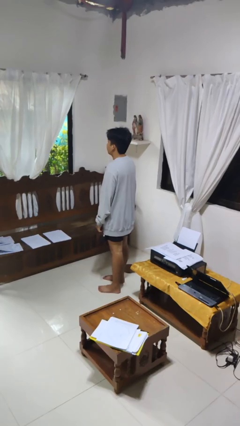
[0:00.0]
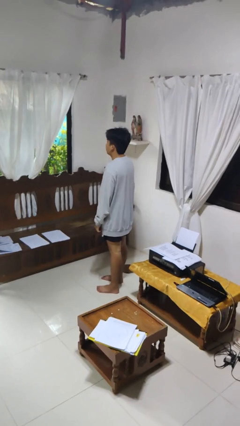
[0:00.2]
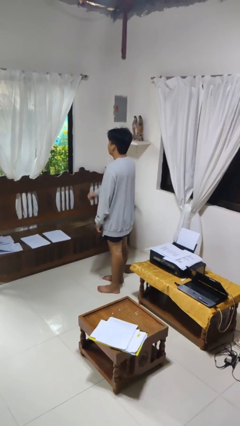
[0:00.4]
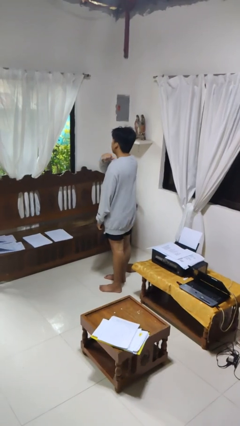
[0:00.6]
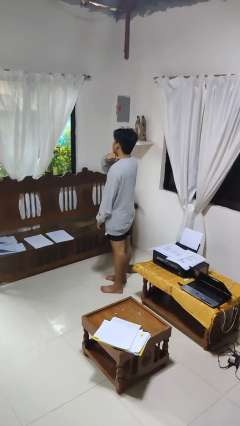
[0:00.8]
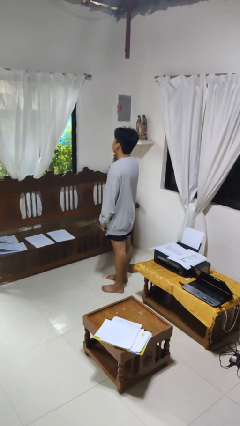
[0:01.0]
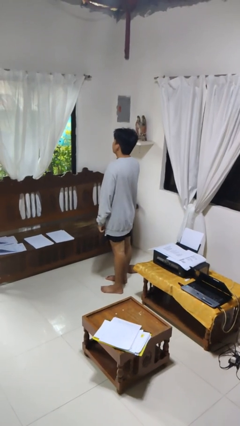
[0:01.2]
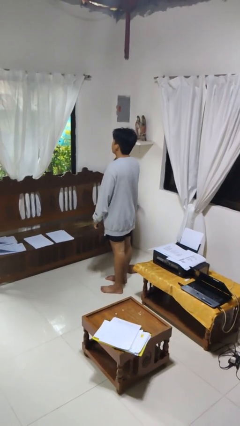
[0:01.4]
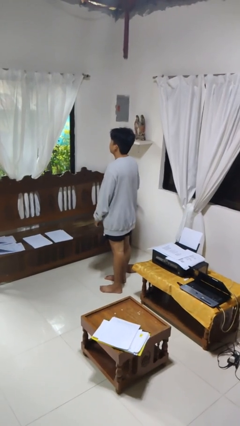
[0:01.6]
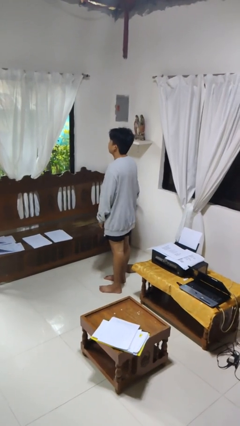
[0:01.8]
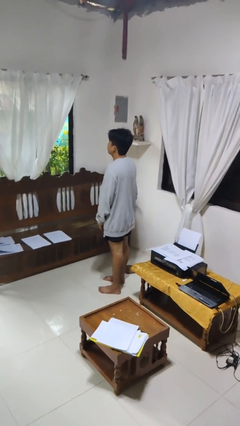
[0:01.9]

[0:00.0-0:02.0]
person gestures cut

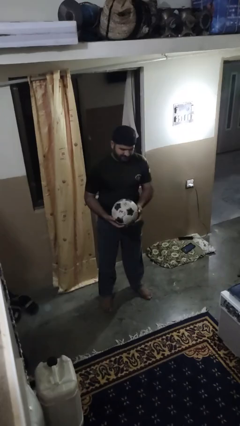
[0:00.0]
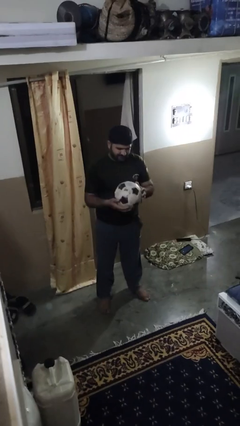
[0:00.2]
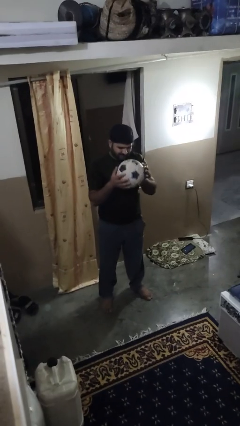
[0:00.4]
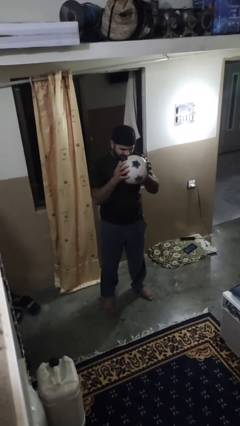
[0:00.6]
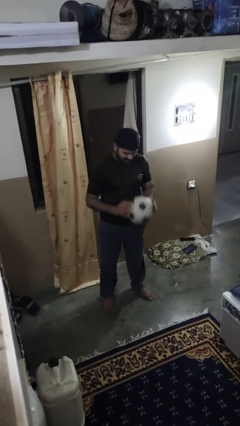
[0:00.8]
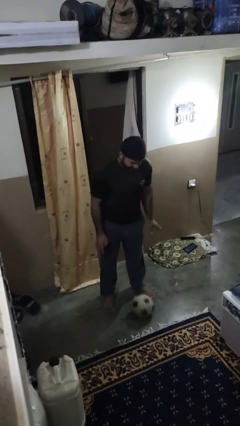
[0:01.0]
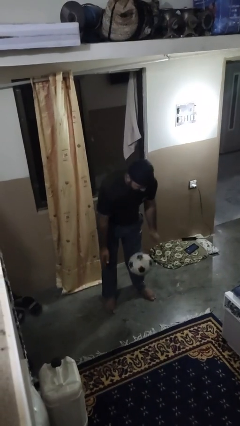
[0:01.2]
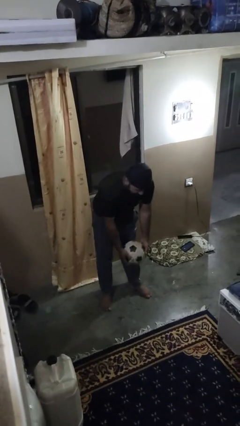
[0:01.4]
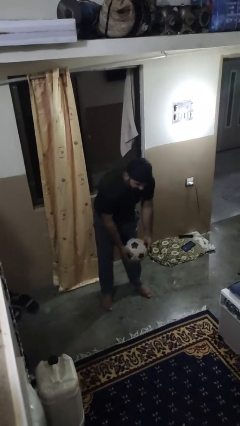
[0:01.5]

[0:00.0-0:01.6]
person bounces ball on floor

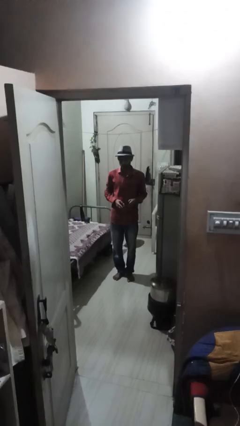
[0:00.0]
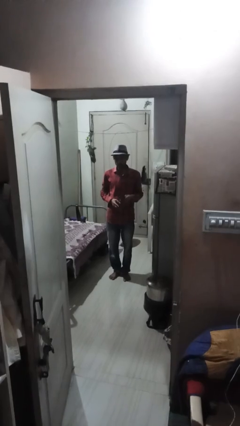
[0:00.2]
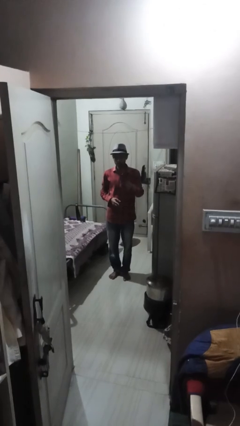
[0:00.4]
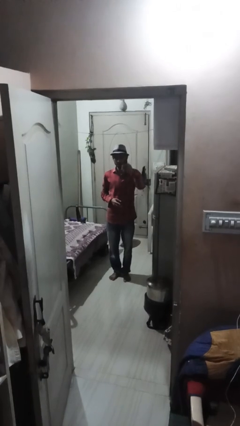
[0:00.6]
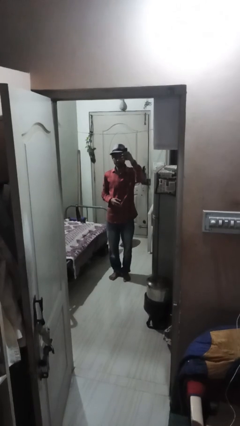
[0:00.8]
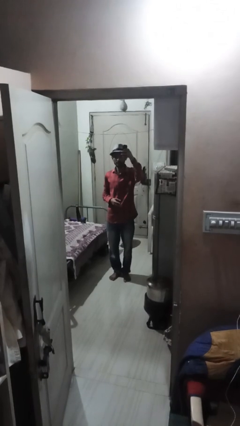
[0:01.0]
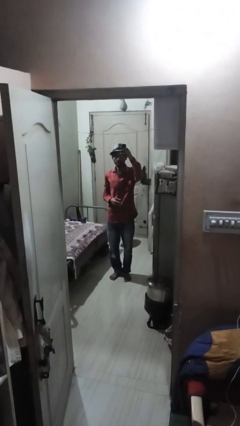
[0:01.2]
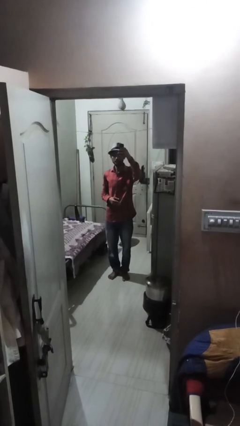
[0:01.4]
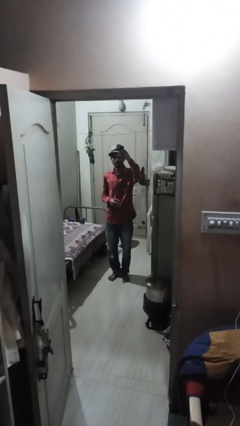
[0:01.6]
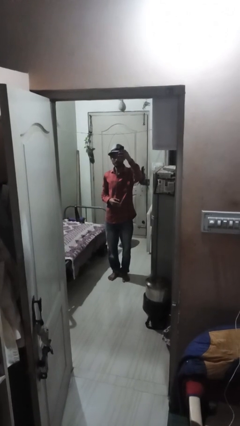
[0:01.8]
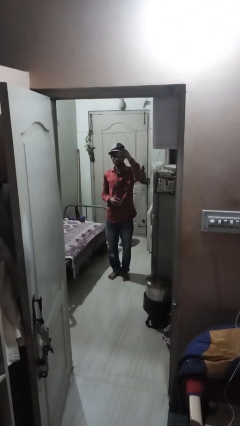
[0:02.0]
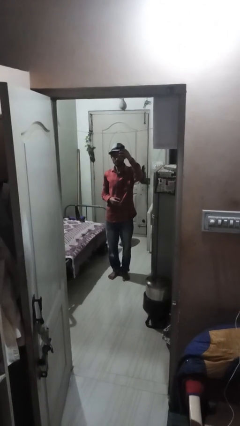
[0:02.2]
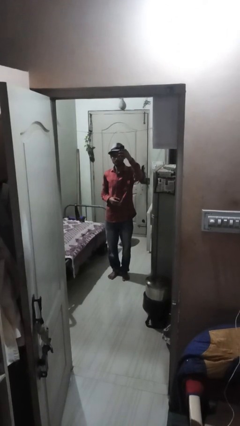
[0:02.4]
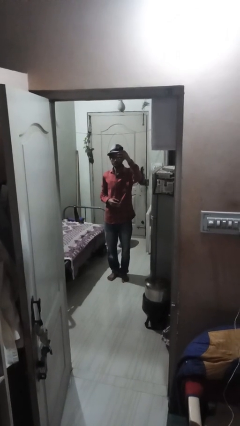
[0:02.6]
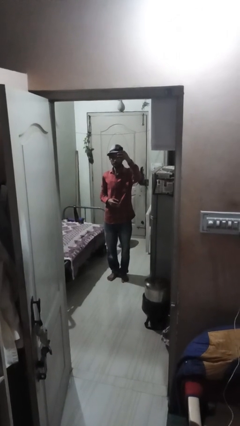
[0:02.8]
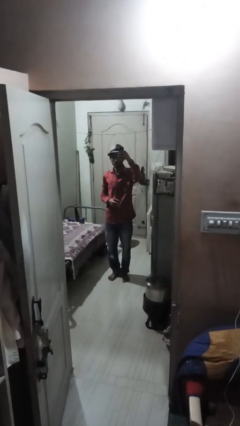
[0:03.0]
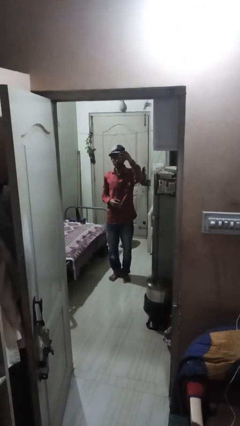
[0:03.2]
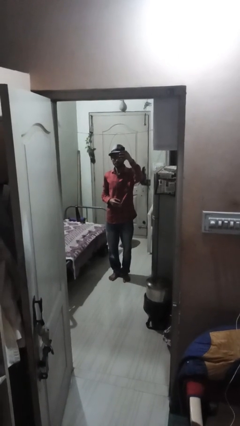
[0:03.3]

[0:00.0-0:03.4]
person takes selfie

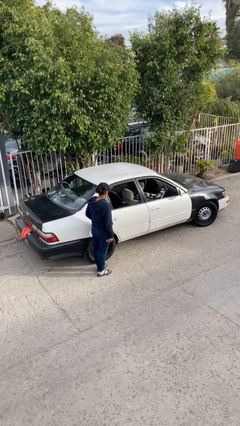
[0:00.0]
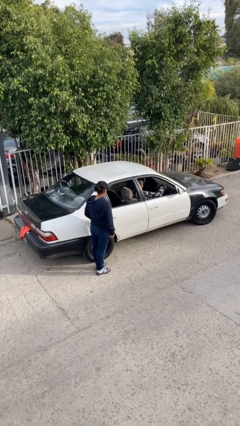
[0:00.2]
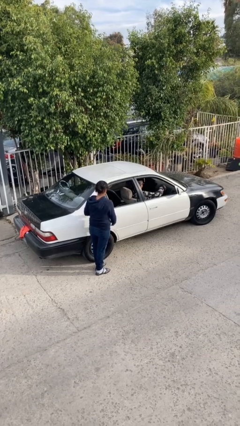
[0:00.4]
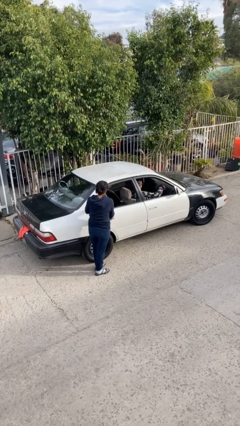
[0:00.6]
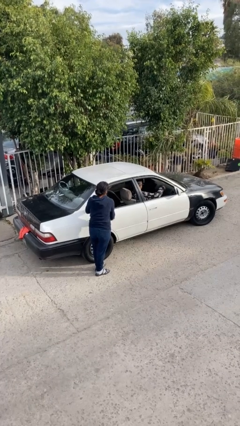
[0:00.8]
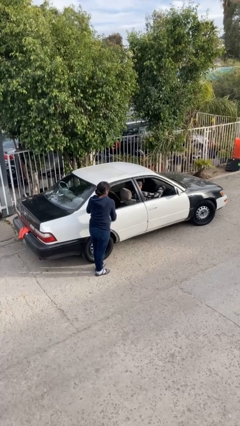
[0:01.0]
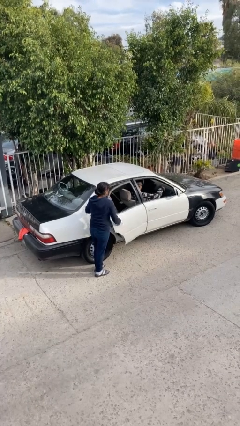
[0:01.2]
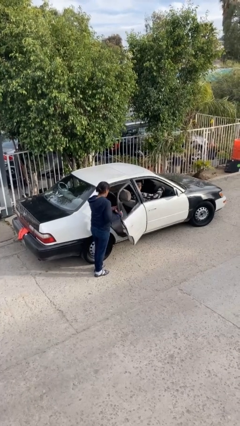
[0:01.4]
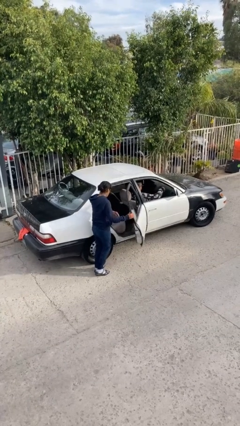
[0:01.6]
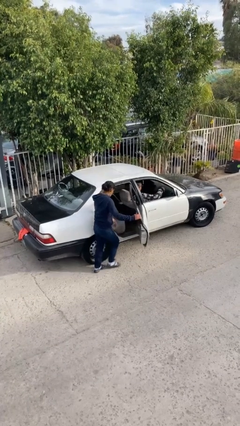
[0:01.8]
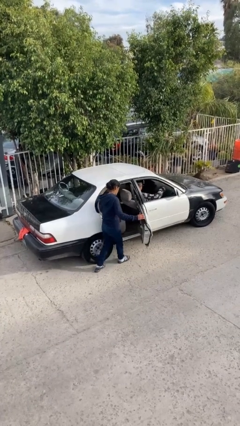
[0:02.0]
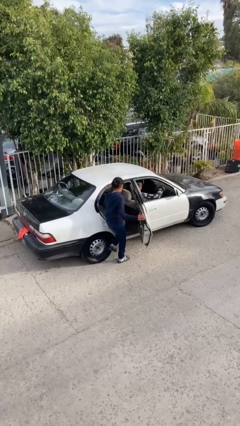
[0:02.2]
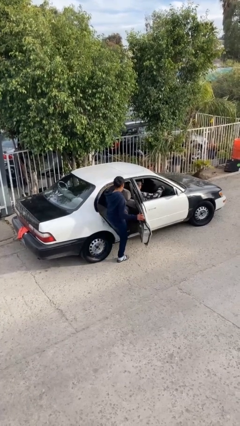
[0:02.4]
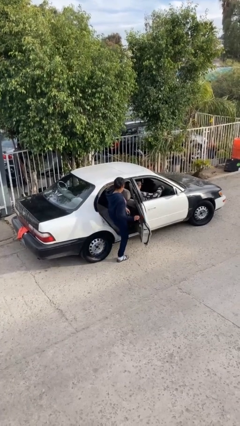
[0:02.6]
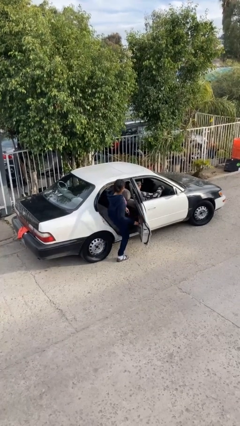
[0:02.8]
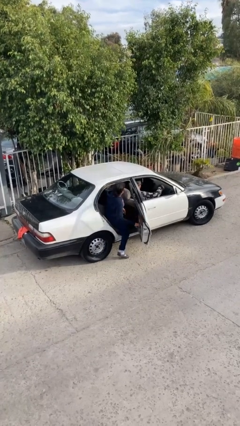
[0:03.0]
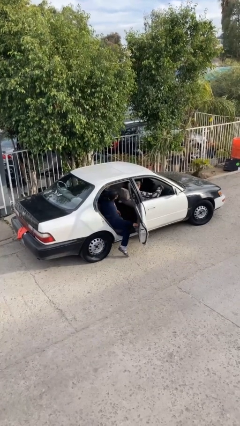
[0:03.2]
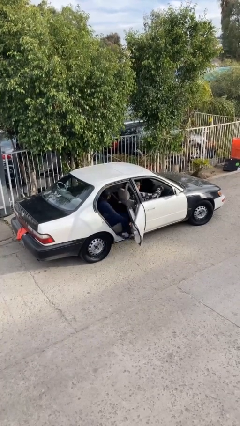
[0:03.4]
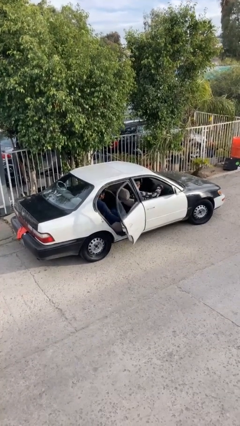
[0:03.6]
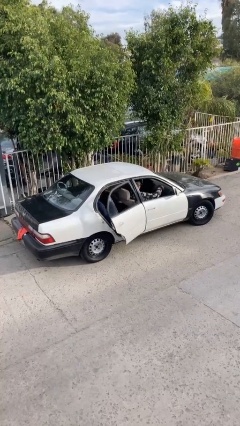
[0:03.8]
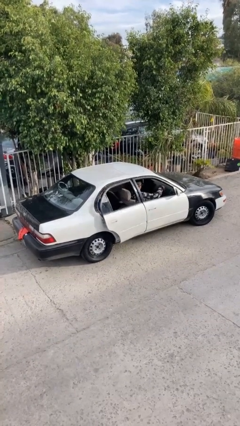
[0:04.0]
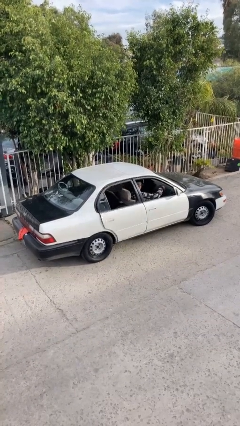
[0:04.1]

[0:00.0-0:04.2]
car picks up person

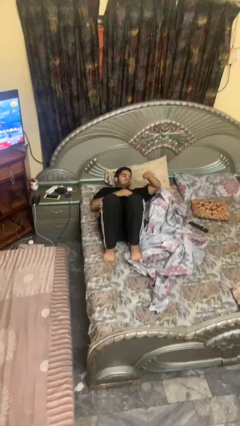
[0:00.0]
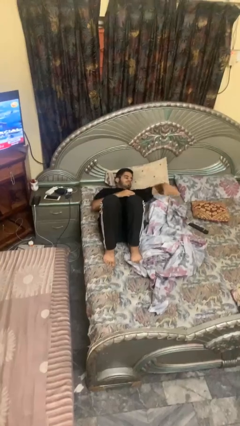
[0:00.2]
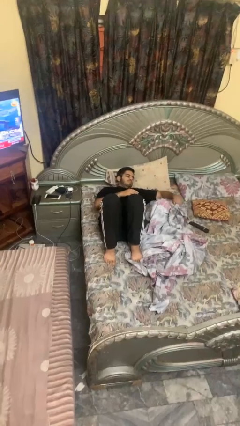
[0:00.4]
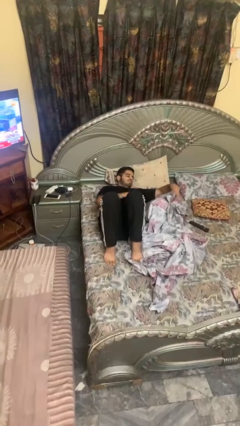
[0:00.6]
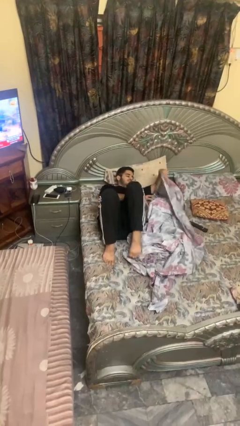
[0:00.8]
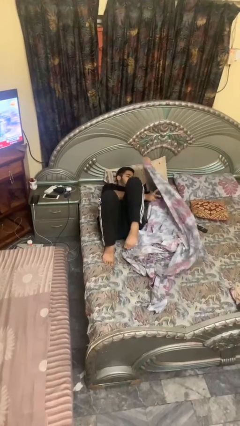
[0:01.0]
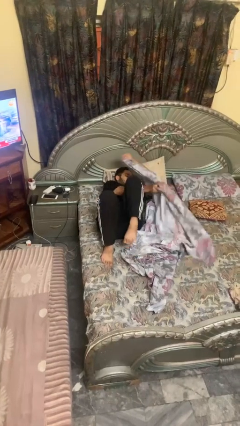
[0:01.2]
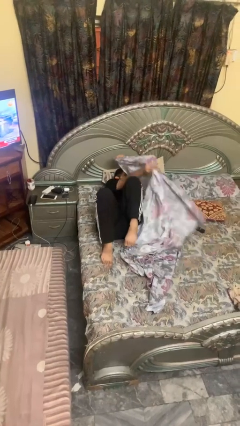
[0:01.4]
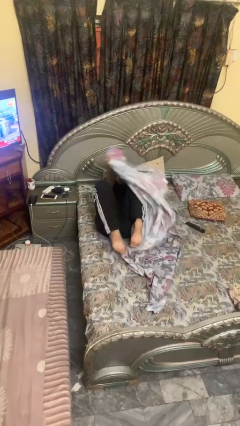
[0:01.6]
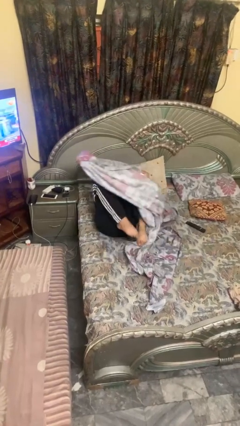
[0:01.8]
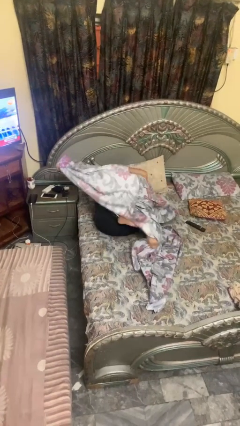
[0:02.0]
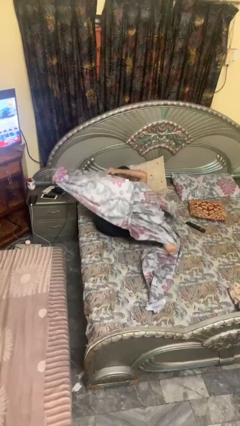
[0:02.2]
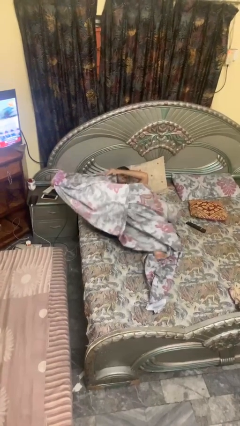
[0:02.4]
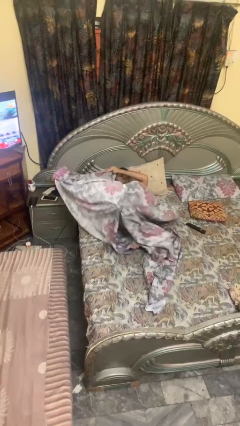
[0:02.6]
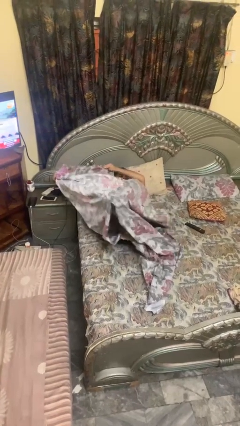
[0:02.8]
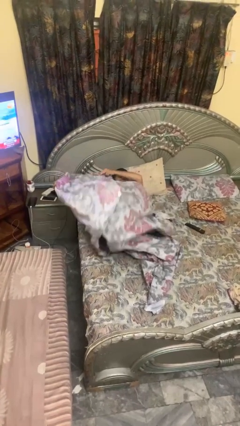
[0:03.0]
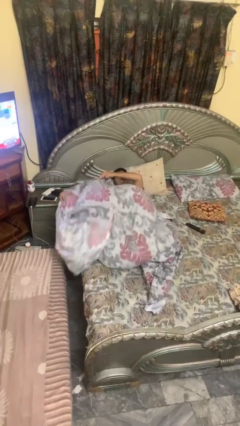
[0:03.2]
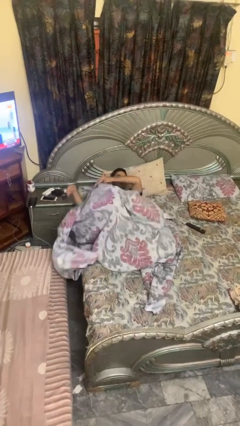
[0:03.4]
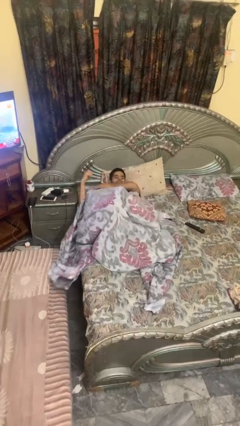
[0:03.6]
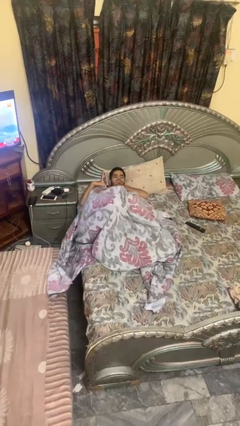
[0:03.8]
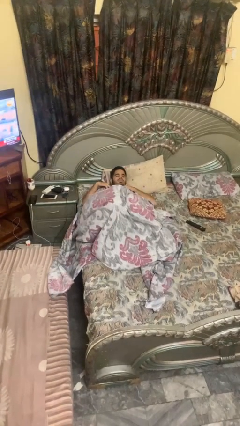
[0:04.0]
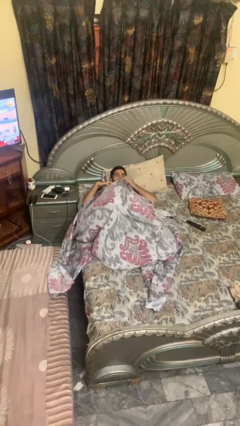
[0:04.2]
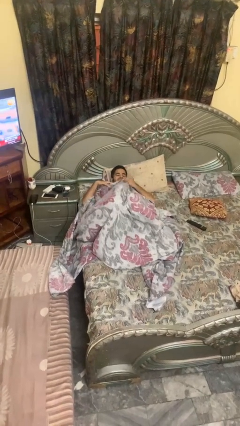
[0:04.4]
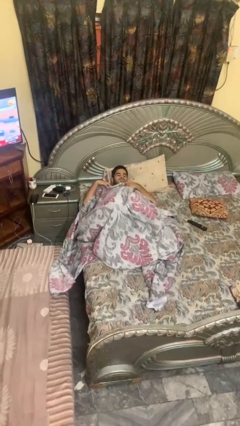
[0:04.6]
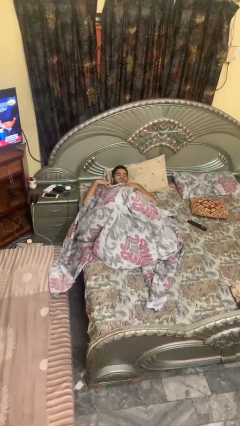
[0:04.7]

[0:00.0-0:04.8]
person covers with bedsheets

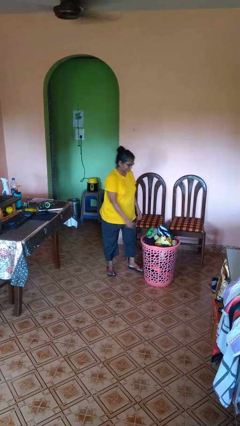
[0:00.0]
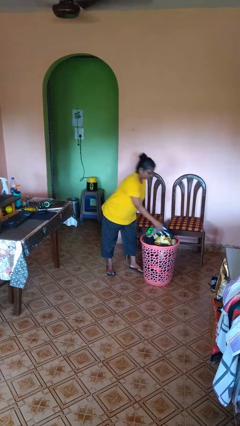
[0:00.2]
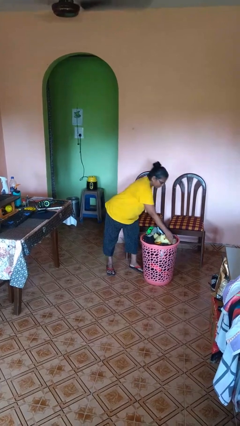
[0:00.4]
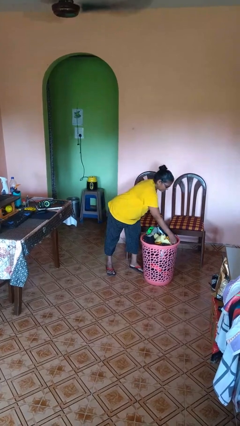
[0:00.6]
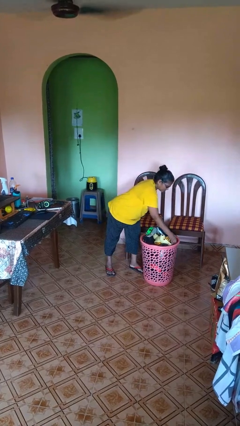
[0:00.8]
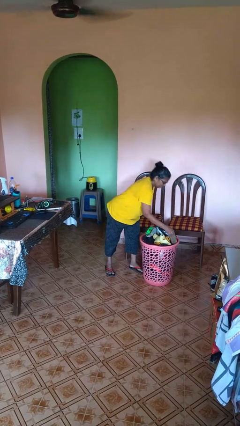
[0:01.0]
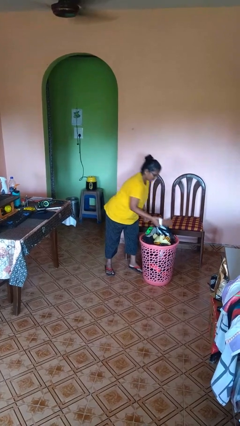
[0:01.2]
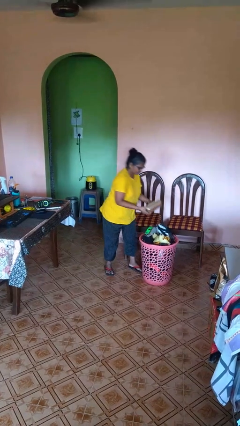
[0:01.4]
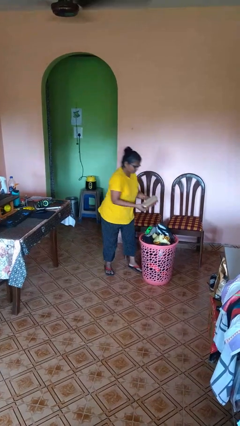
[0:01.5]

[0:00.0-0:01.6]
person takes object from basket
